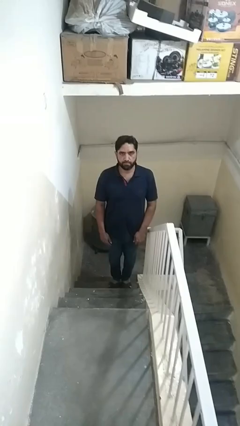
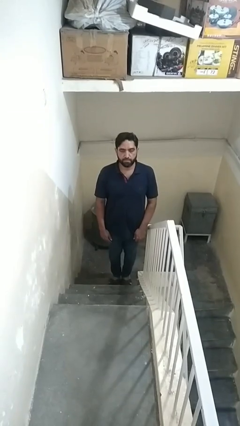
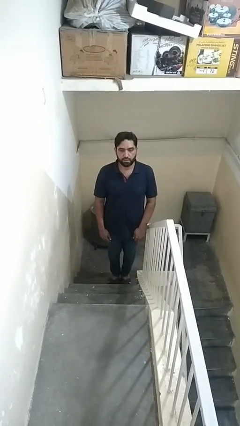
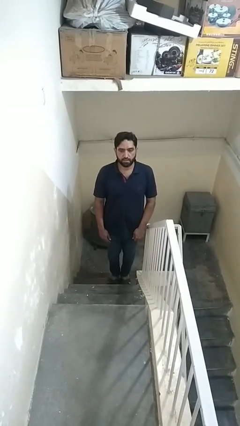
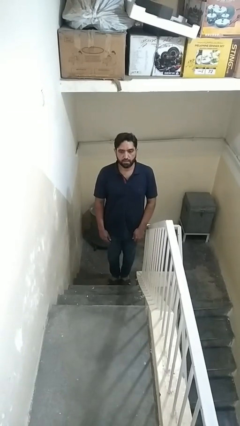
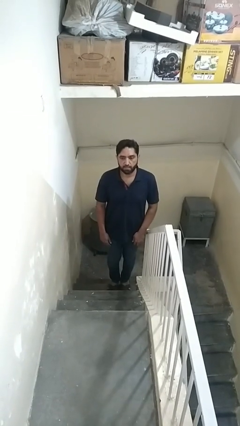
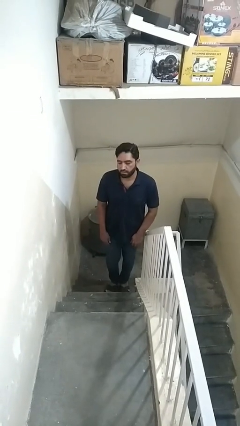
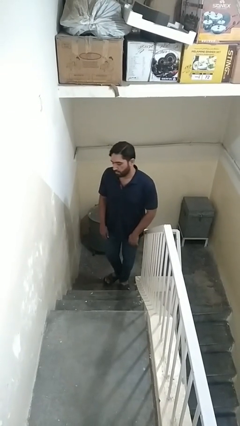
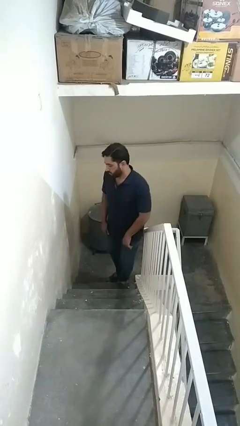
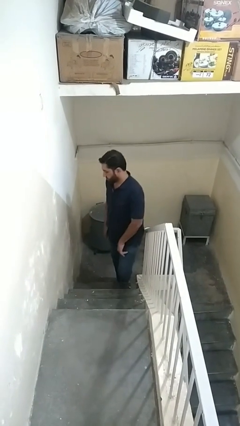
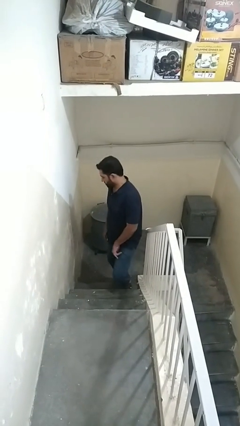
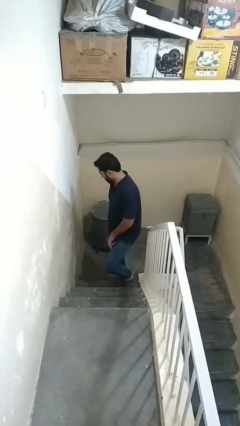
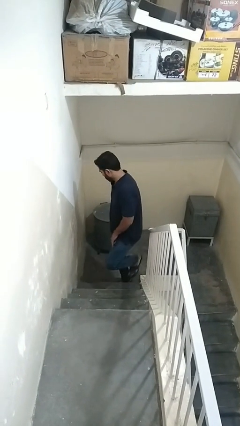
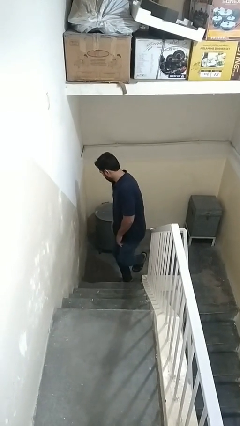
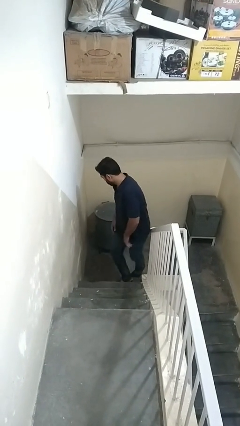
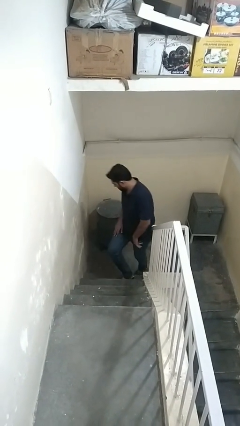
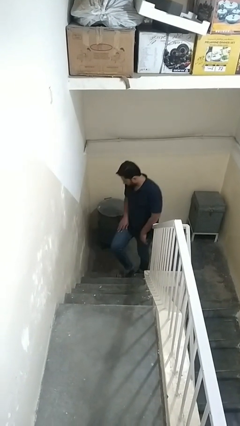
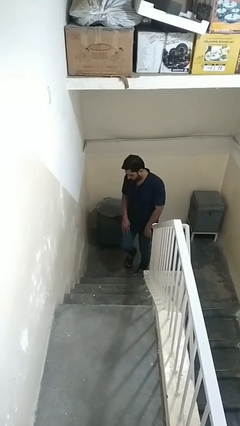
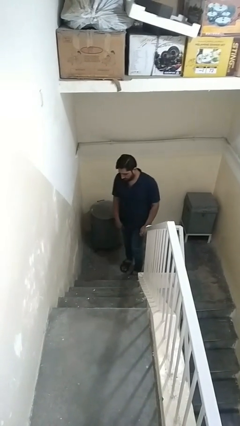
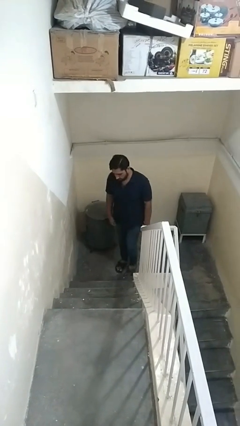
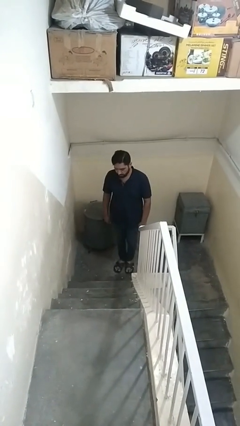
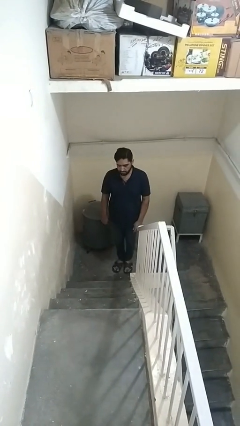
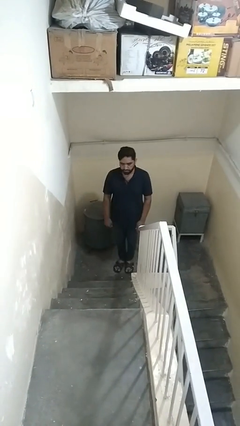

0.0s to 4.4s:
person climbs down stairs

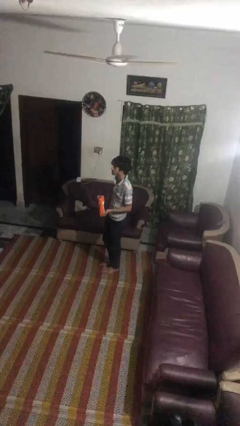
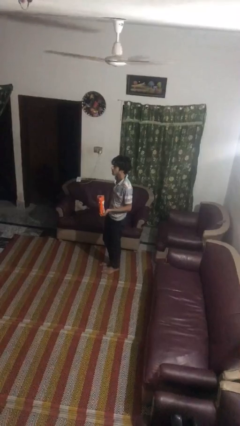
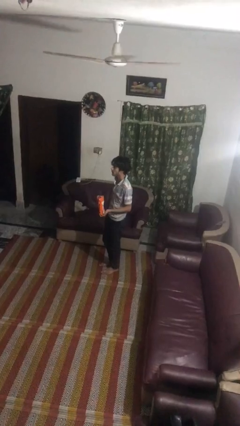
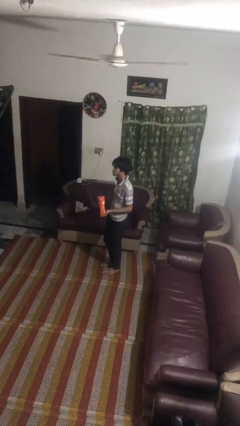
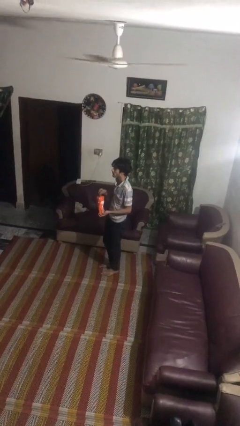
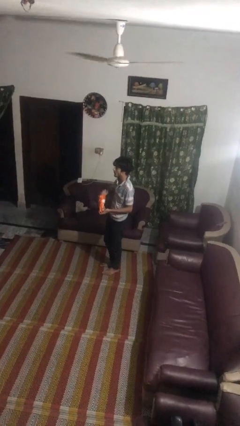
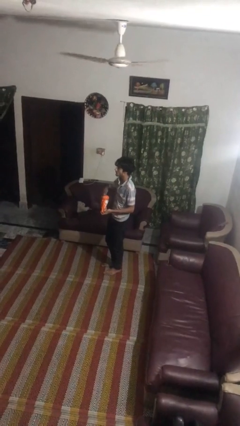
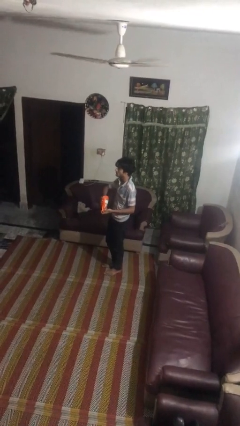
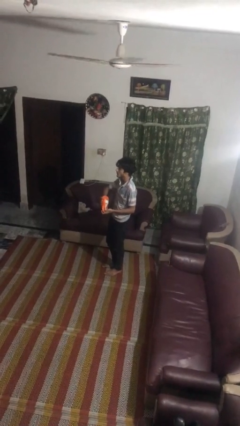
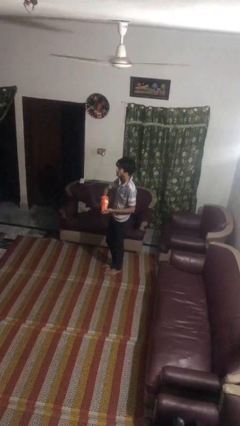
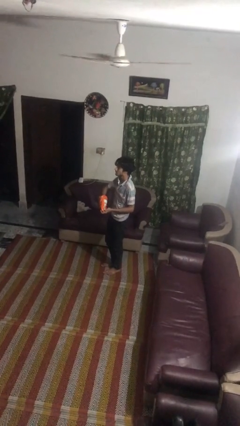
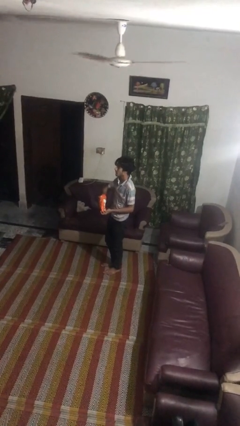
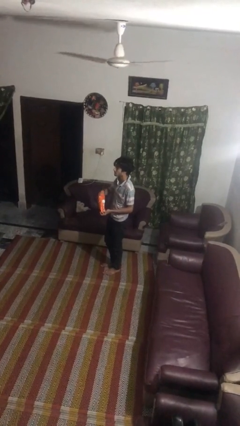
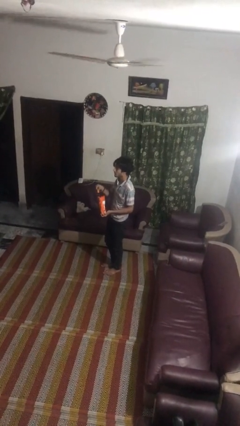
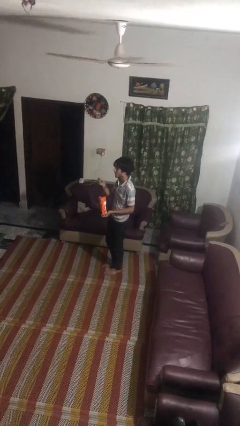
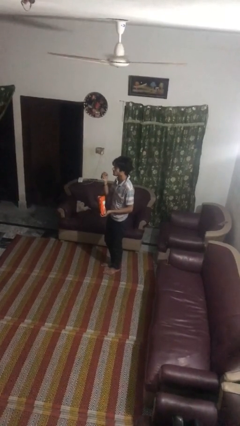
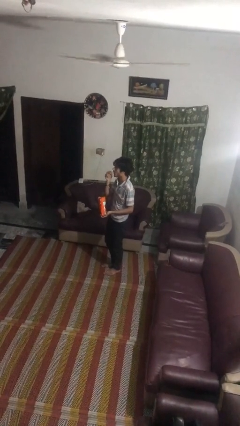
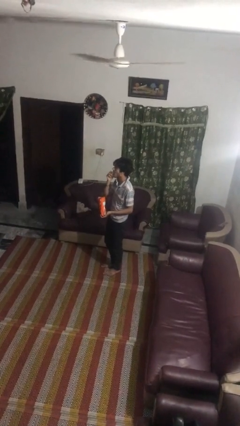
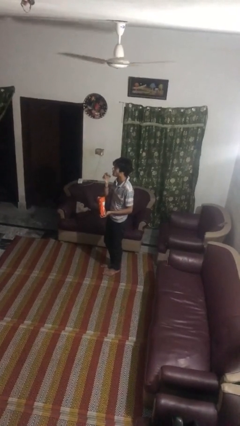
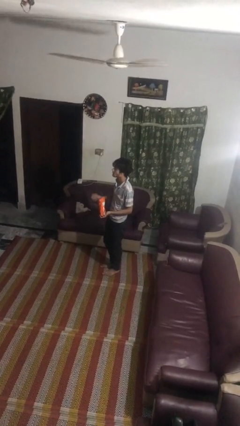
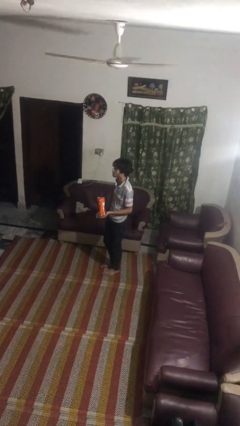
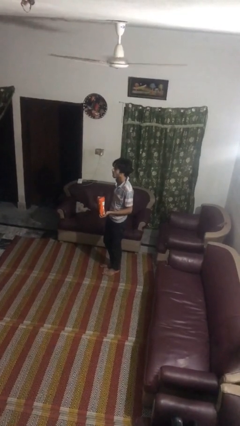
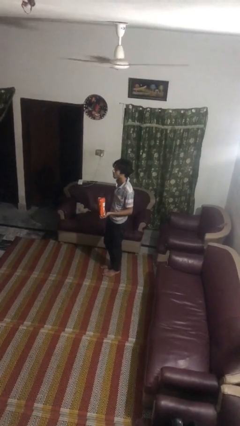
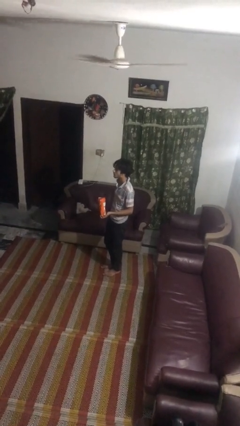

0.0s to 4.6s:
person eats snack from bag

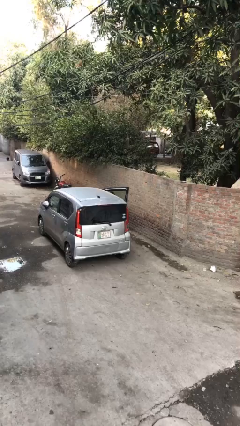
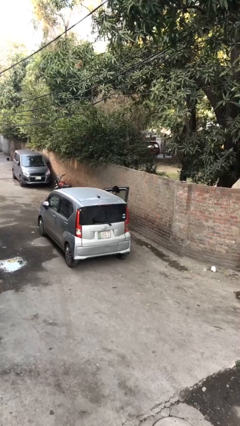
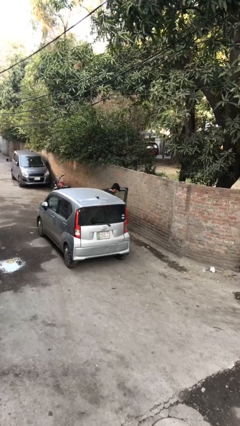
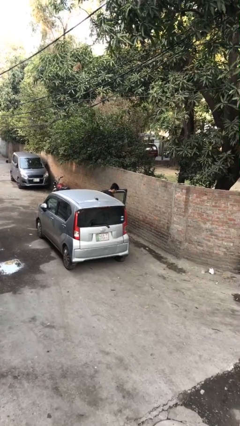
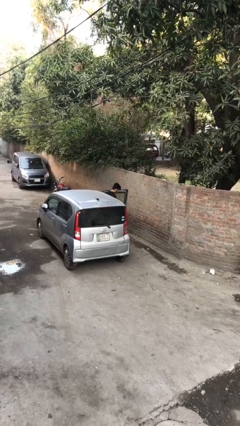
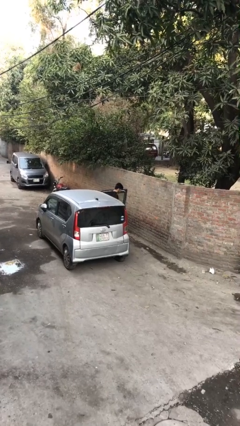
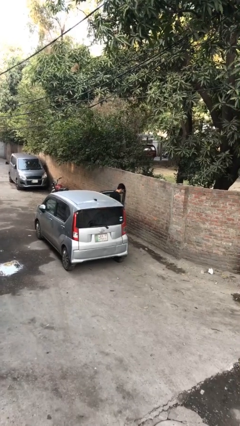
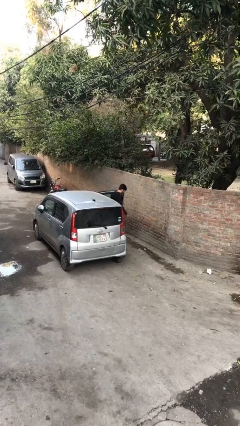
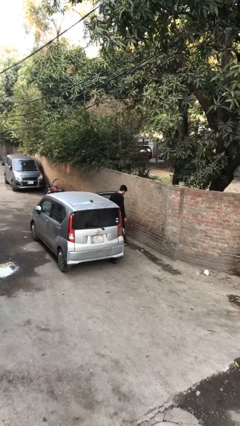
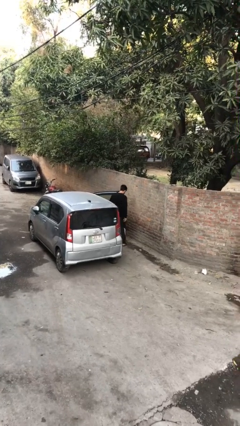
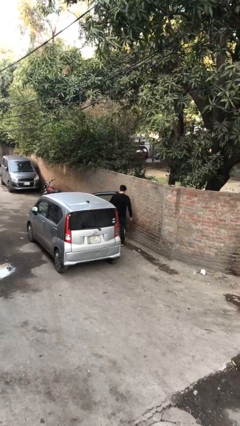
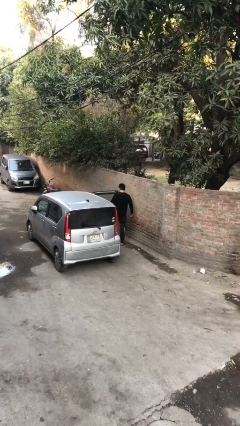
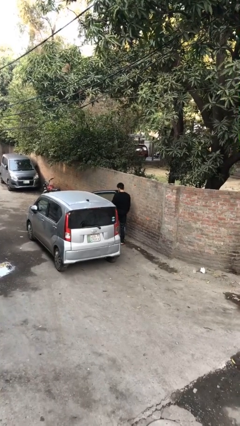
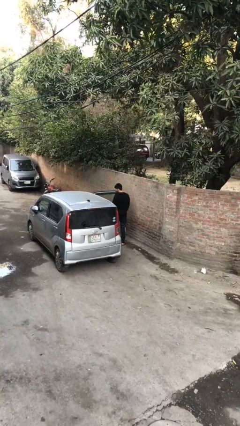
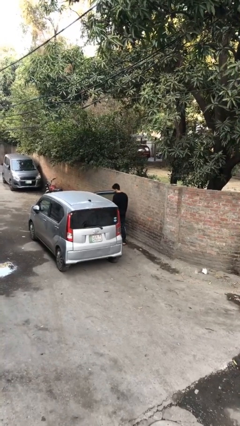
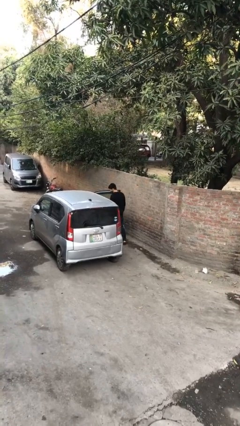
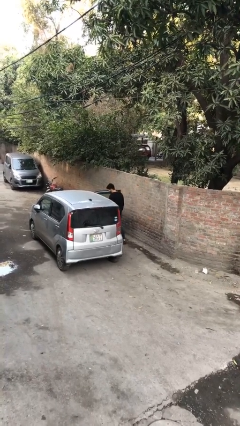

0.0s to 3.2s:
person exits car

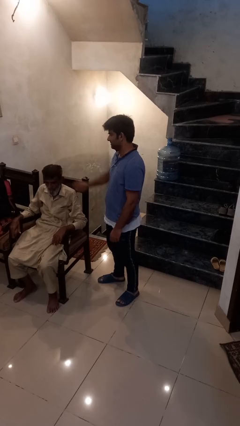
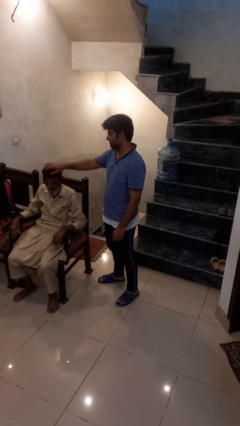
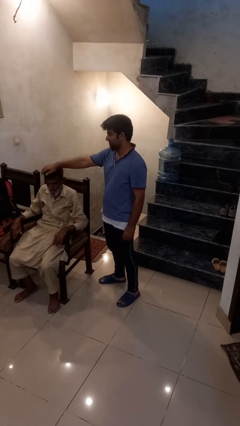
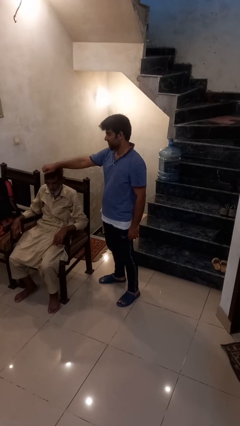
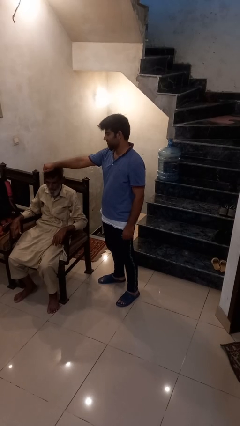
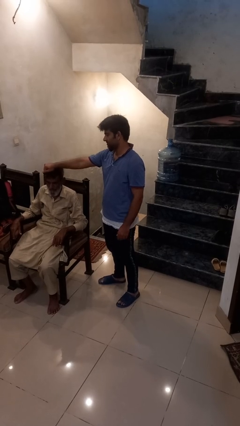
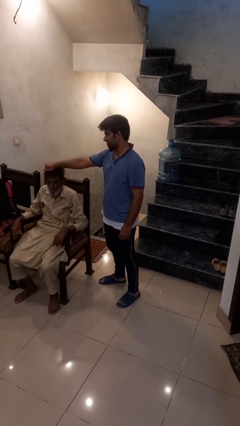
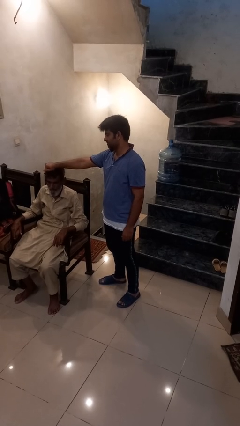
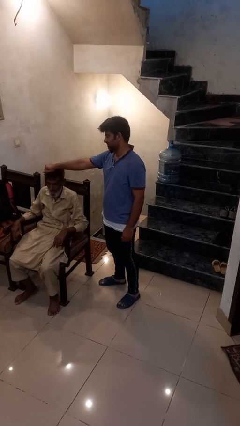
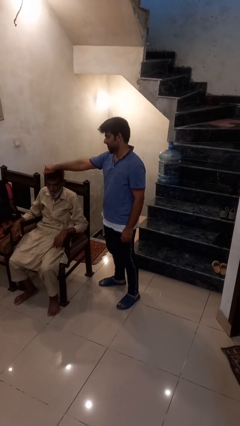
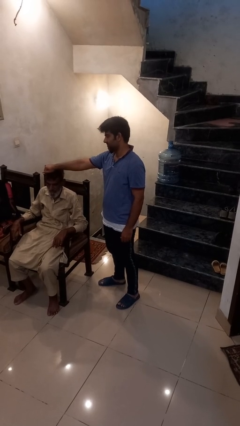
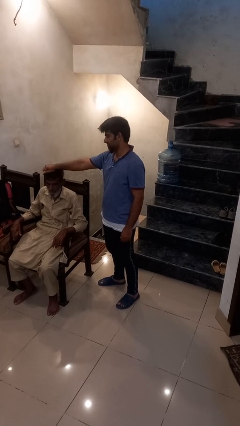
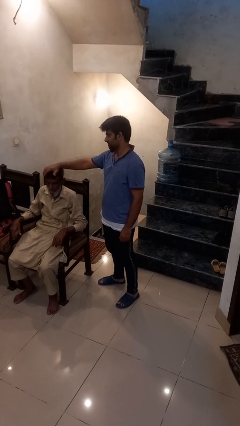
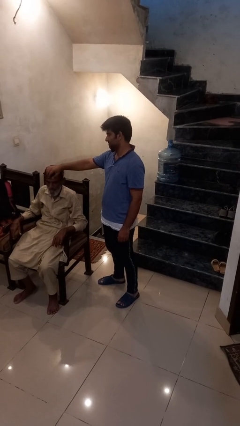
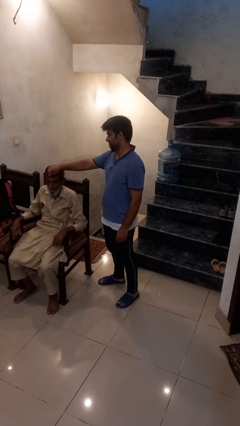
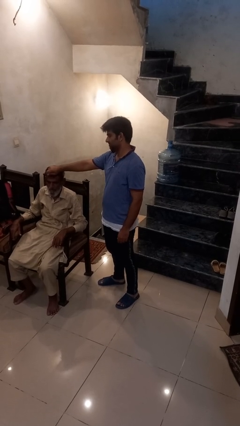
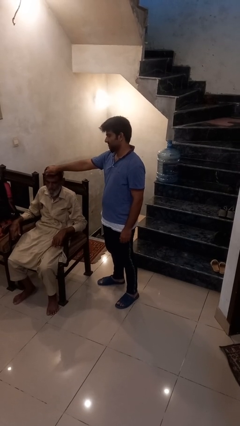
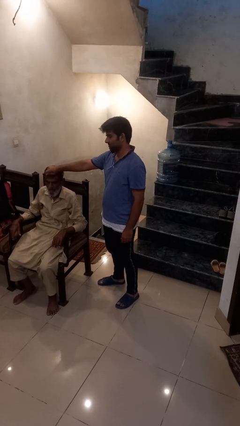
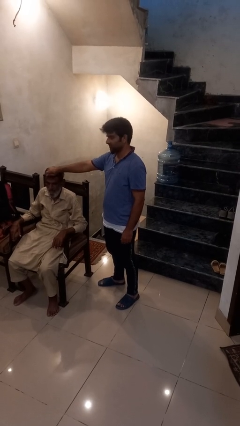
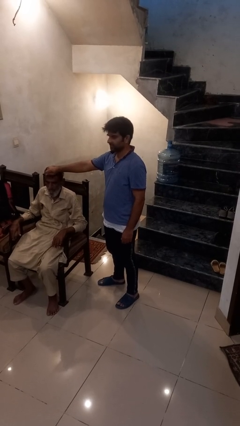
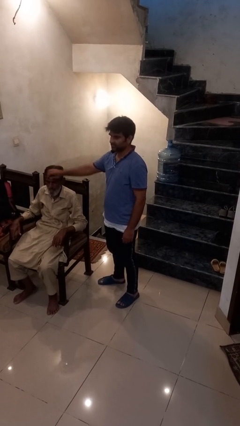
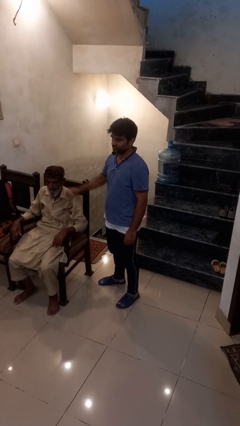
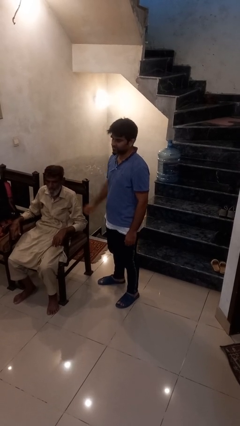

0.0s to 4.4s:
person grabs person by hair

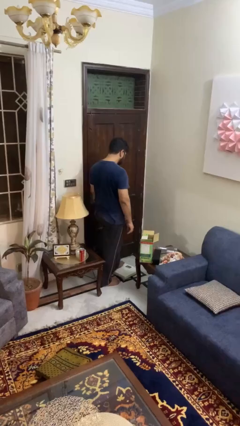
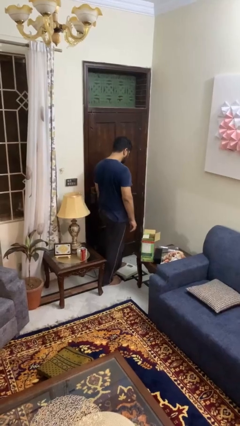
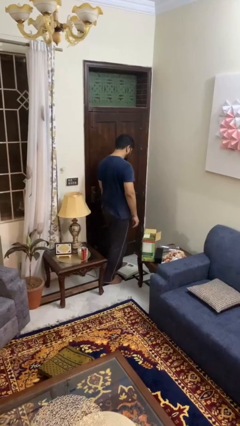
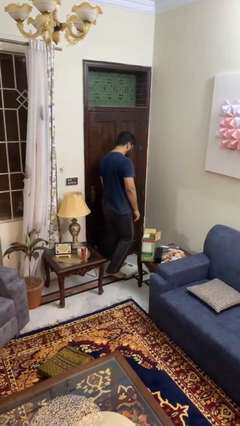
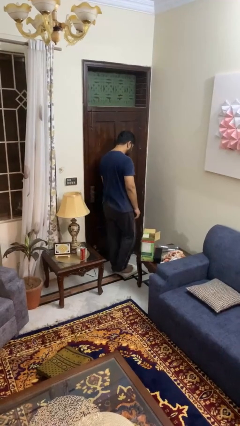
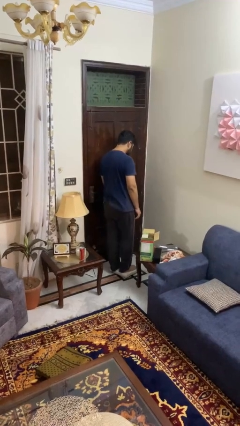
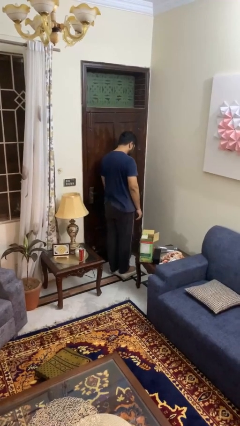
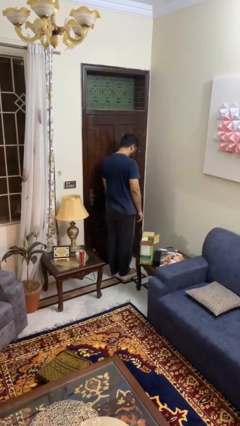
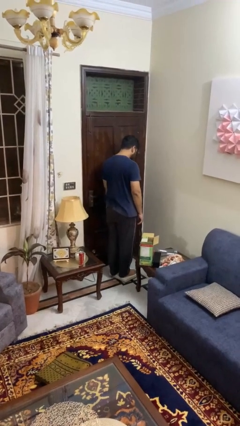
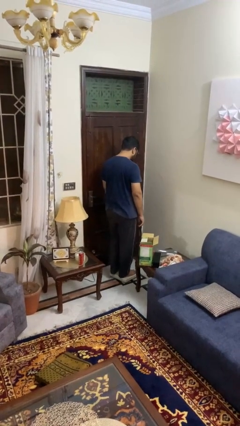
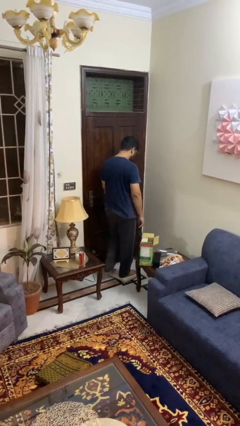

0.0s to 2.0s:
person uses bodyweight scale
